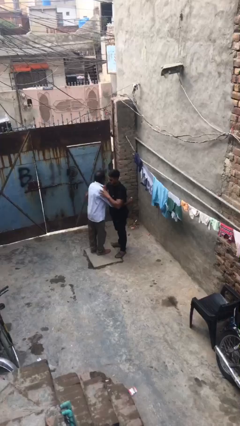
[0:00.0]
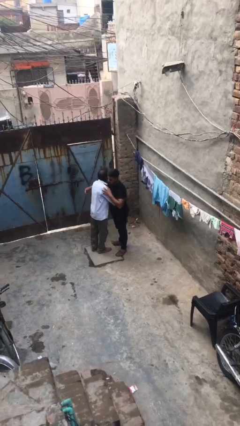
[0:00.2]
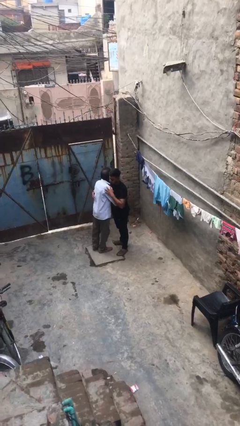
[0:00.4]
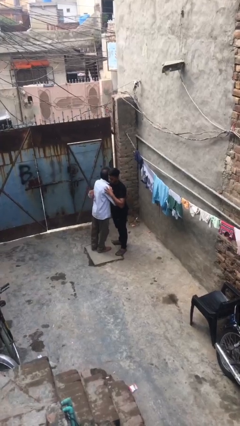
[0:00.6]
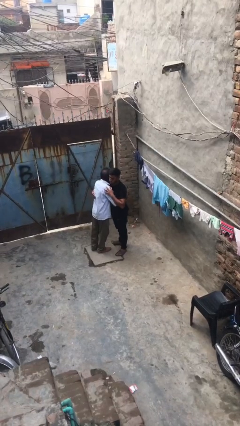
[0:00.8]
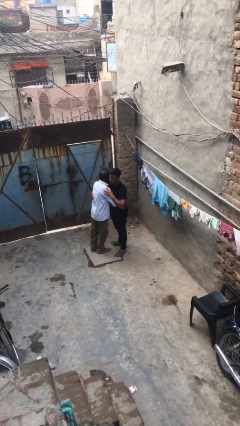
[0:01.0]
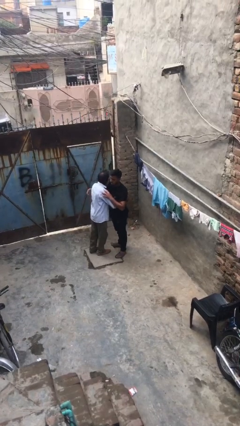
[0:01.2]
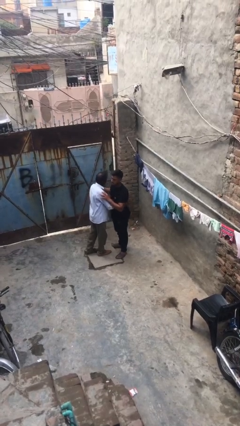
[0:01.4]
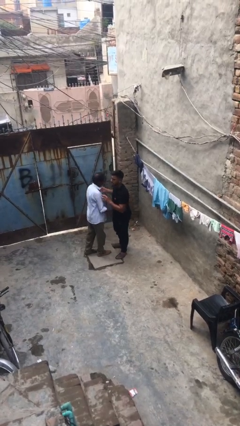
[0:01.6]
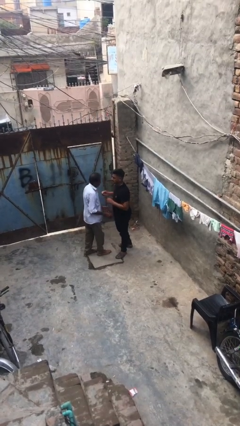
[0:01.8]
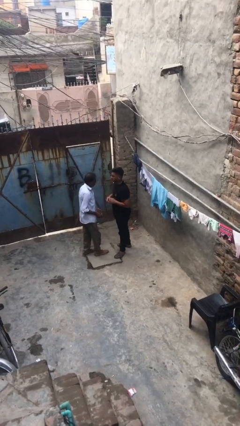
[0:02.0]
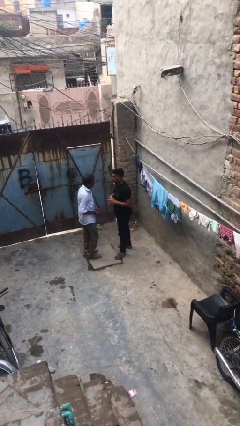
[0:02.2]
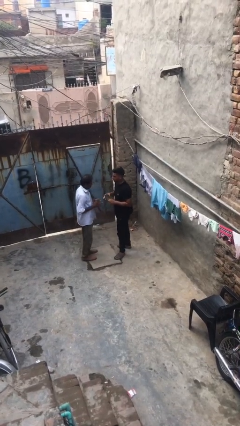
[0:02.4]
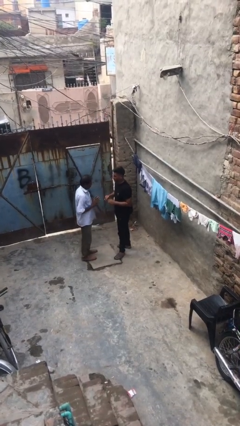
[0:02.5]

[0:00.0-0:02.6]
person embraces person

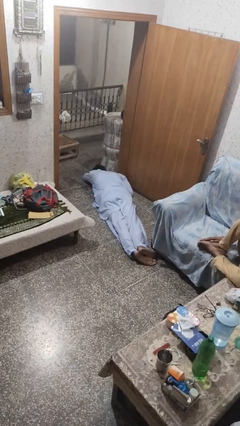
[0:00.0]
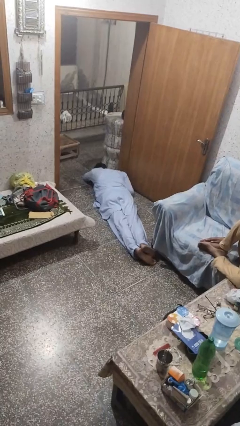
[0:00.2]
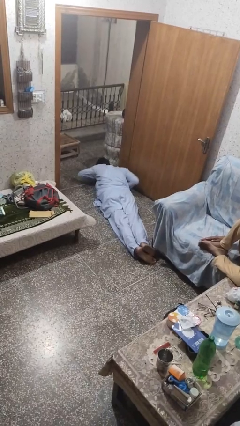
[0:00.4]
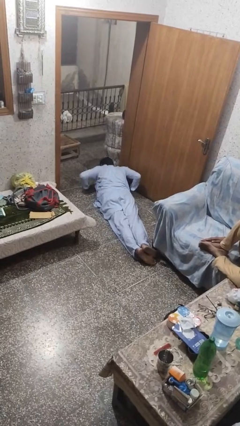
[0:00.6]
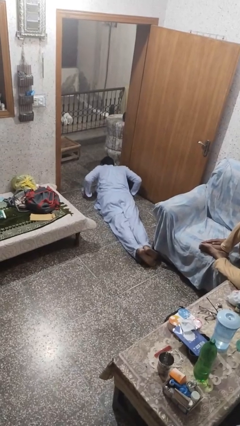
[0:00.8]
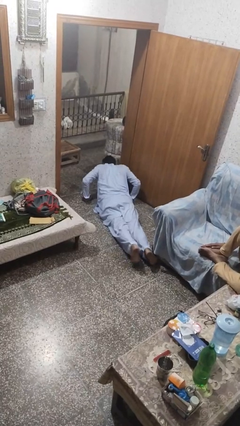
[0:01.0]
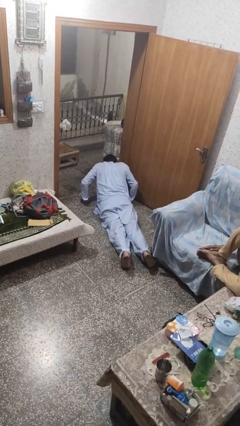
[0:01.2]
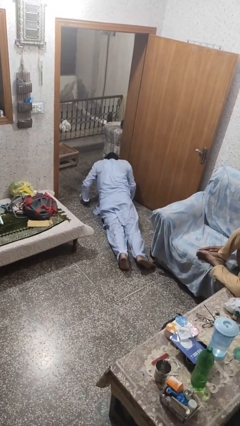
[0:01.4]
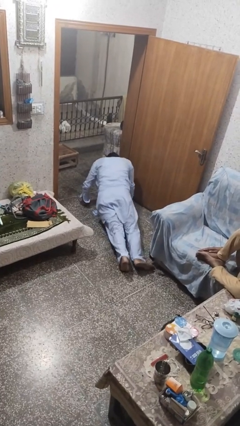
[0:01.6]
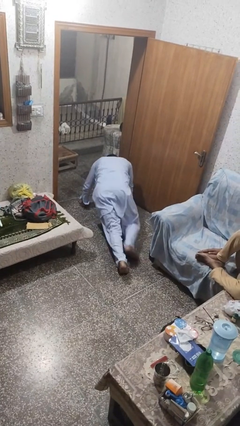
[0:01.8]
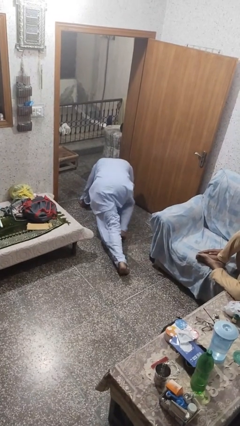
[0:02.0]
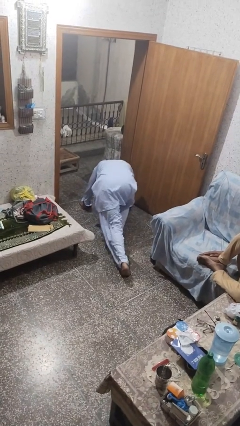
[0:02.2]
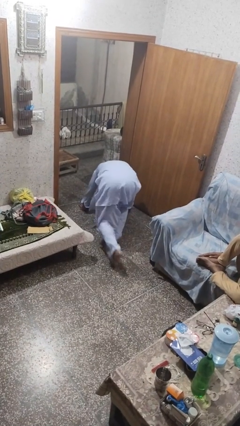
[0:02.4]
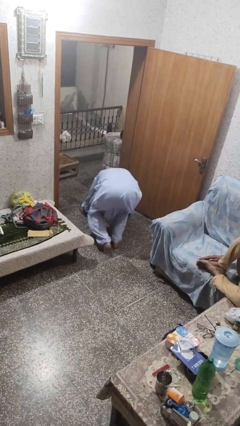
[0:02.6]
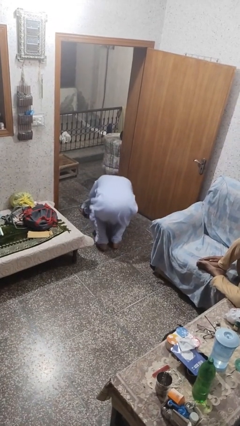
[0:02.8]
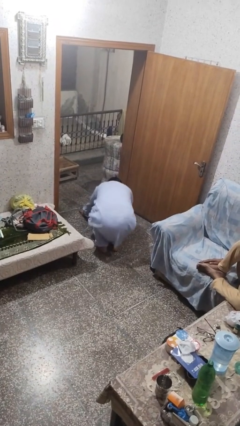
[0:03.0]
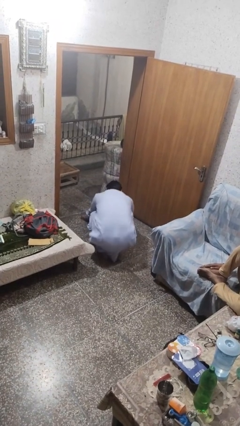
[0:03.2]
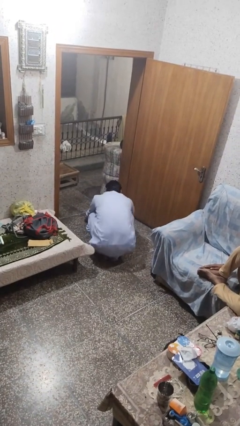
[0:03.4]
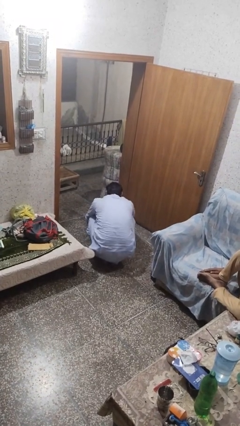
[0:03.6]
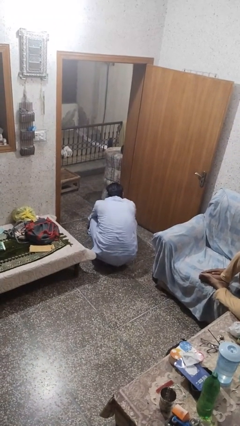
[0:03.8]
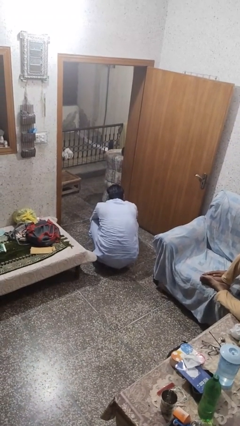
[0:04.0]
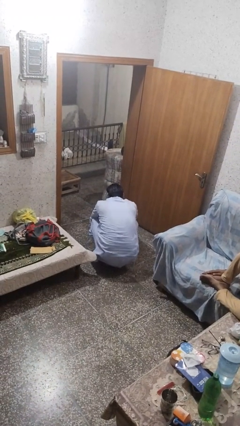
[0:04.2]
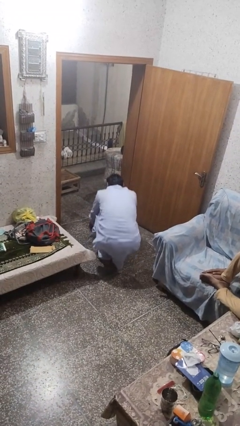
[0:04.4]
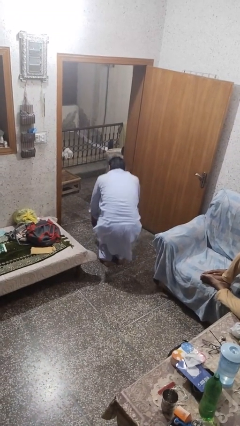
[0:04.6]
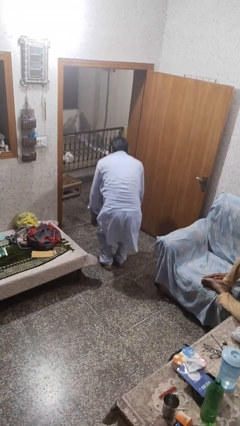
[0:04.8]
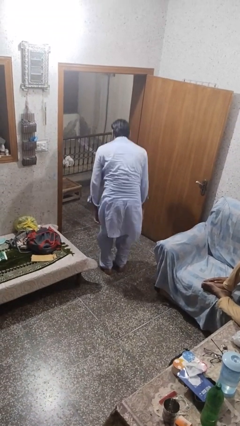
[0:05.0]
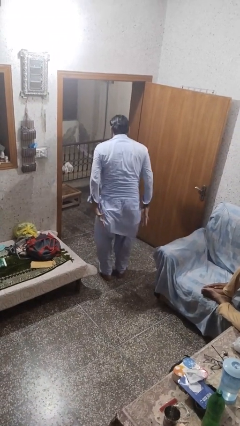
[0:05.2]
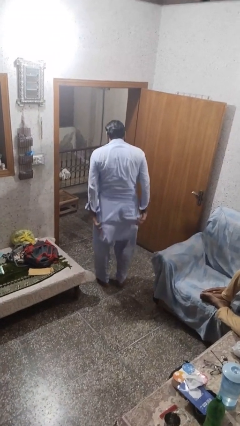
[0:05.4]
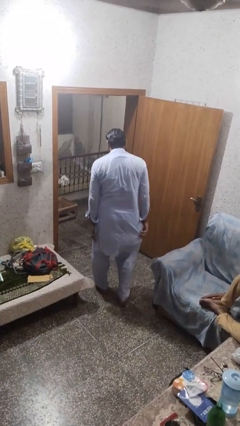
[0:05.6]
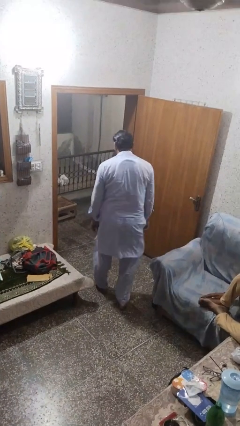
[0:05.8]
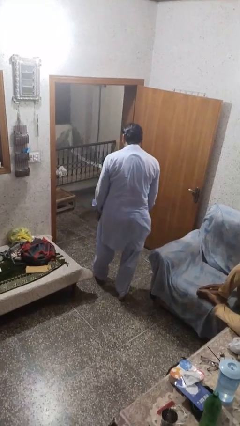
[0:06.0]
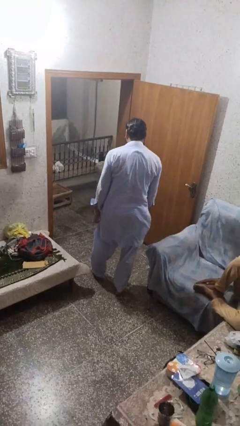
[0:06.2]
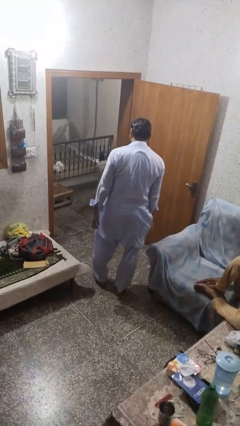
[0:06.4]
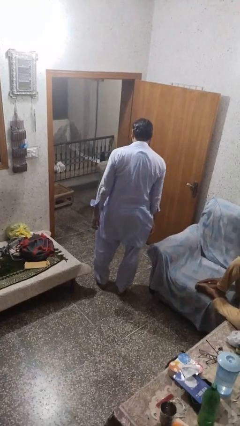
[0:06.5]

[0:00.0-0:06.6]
person stands up from floor

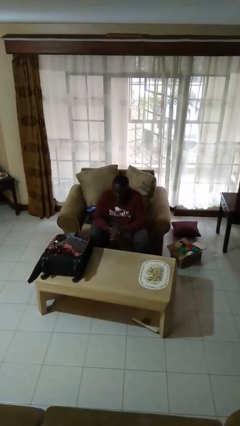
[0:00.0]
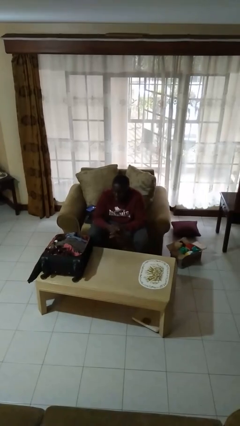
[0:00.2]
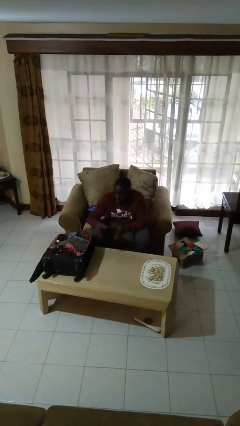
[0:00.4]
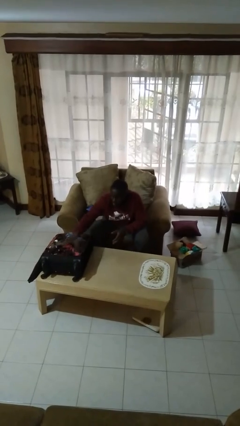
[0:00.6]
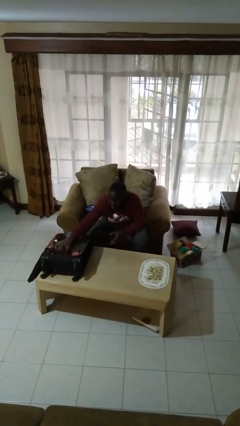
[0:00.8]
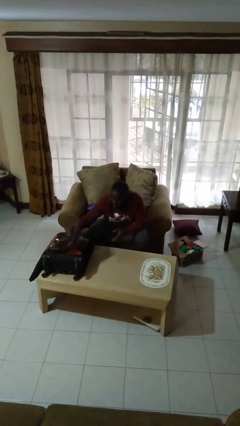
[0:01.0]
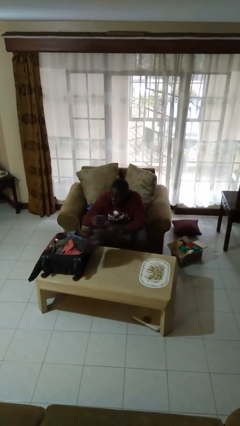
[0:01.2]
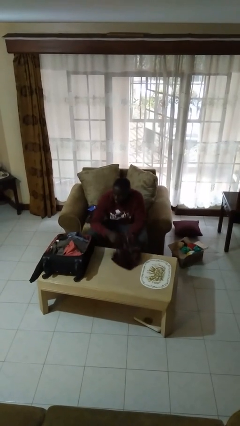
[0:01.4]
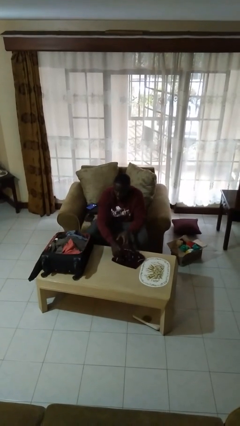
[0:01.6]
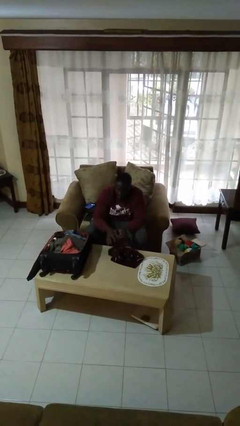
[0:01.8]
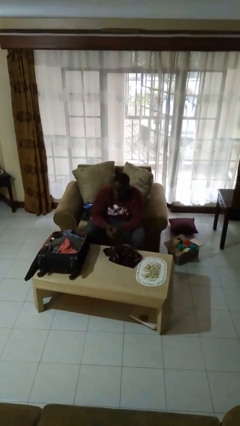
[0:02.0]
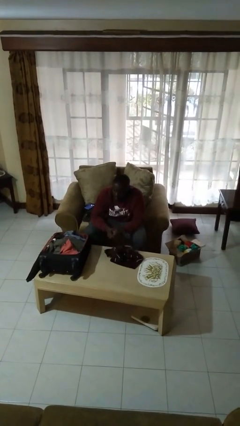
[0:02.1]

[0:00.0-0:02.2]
person unloads clothes from suitcase

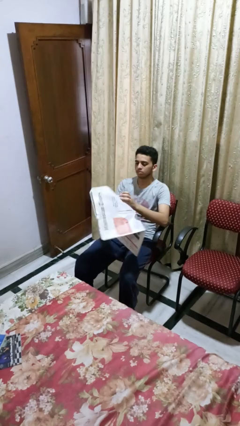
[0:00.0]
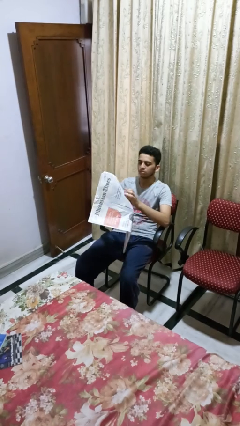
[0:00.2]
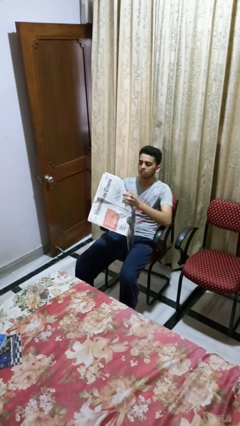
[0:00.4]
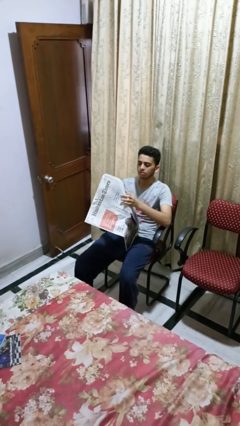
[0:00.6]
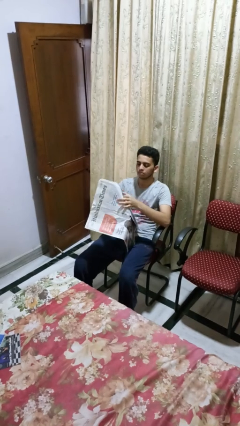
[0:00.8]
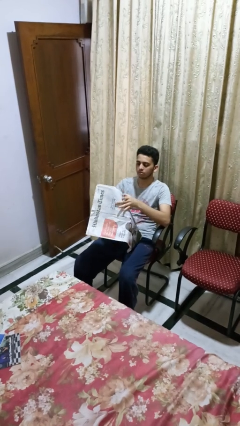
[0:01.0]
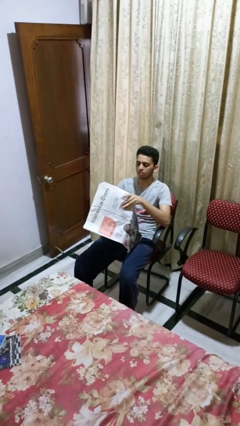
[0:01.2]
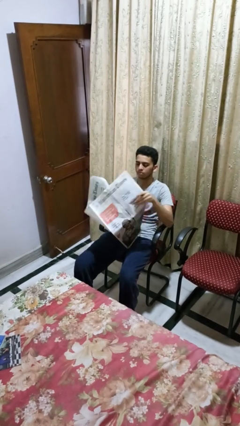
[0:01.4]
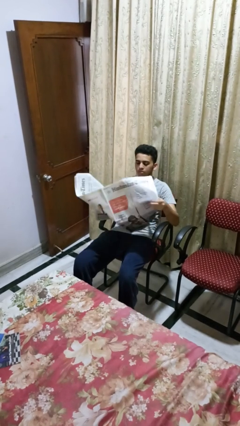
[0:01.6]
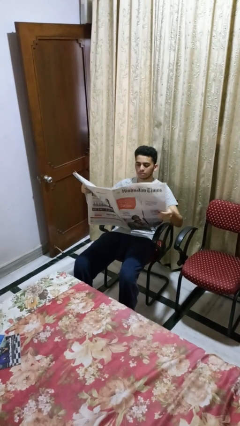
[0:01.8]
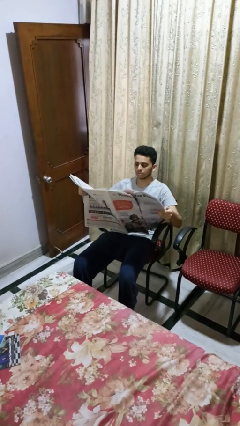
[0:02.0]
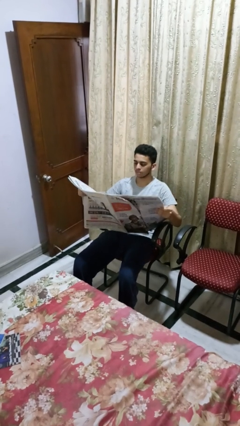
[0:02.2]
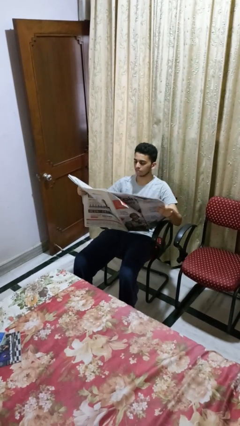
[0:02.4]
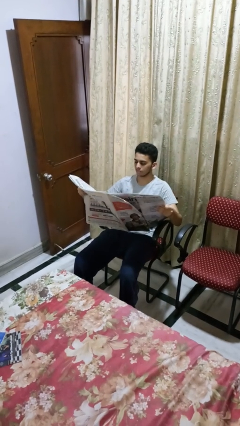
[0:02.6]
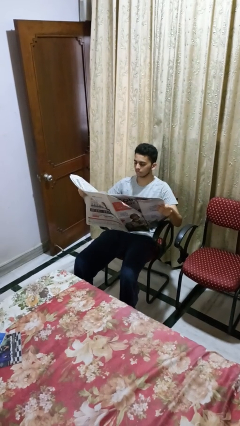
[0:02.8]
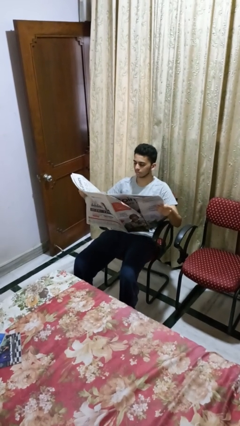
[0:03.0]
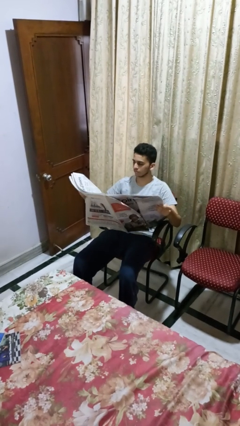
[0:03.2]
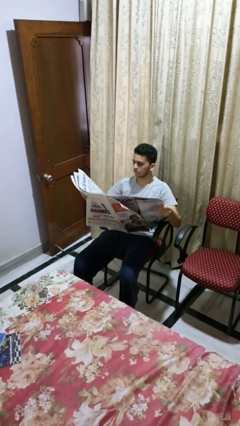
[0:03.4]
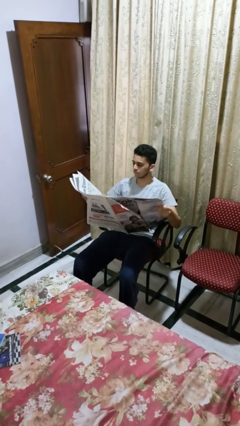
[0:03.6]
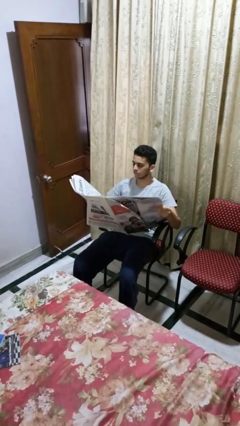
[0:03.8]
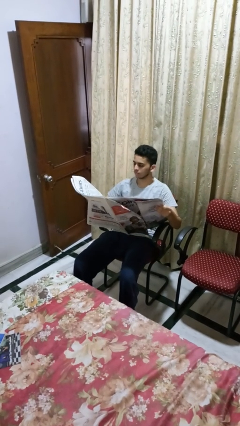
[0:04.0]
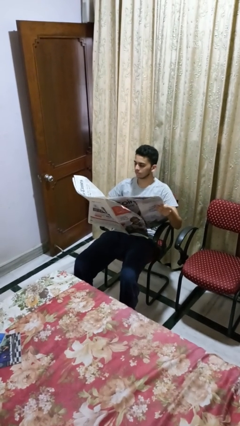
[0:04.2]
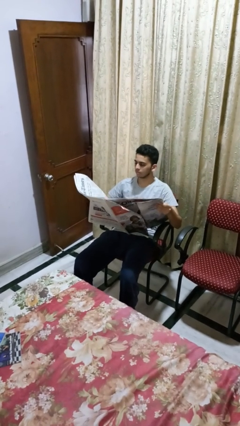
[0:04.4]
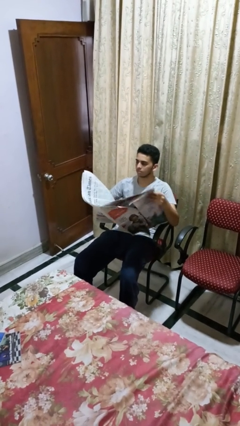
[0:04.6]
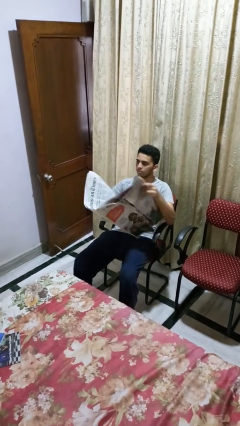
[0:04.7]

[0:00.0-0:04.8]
person reads newspaper

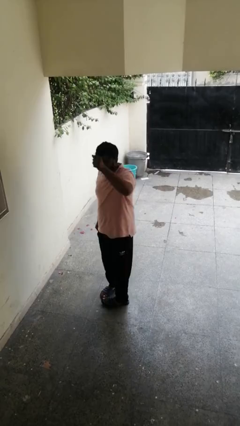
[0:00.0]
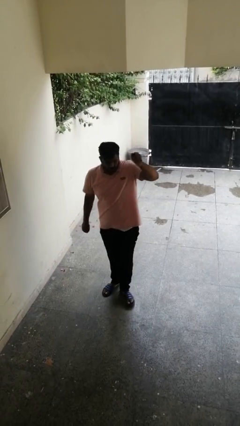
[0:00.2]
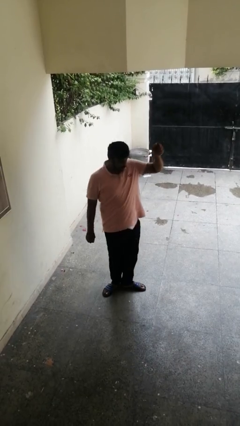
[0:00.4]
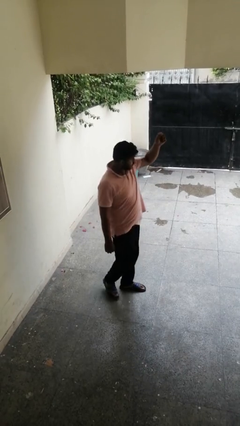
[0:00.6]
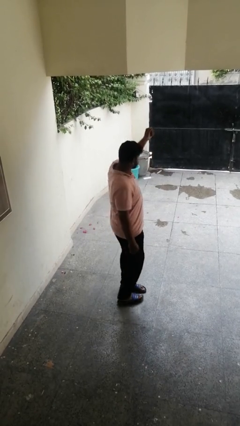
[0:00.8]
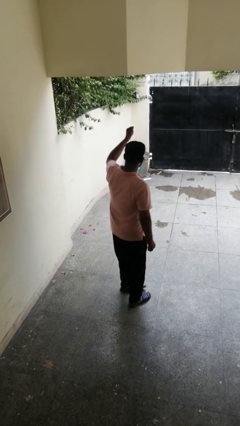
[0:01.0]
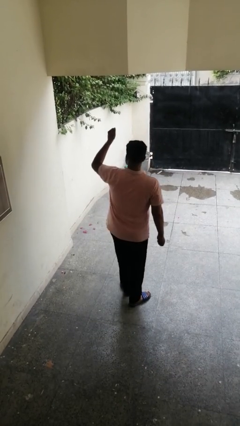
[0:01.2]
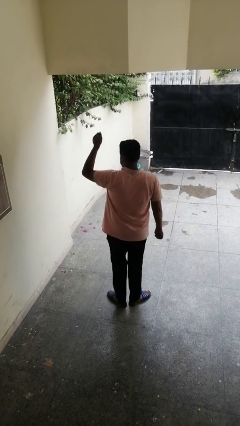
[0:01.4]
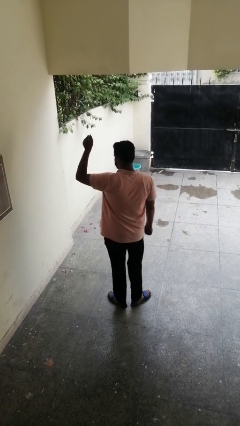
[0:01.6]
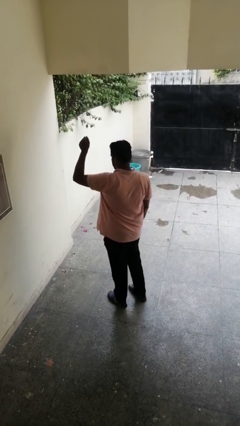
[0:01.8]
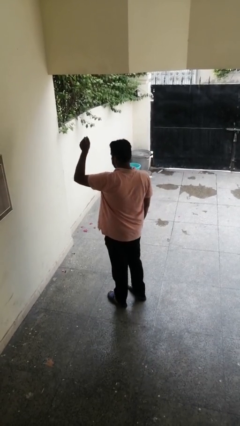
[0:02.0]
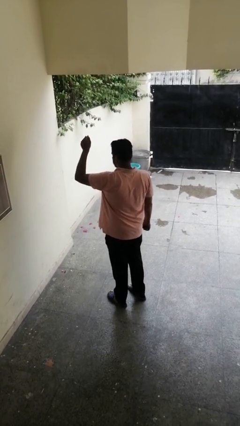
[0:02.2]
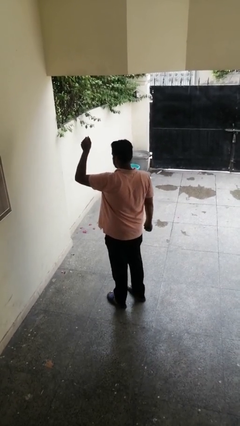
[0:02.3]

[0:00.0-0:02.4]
person twirls
